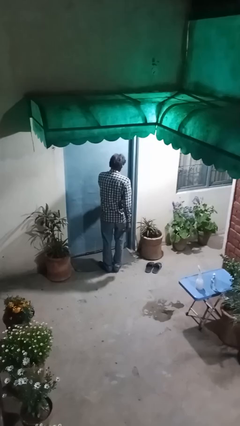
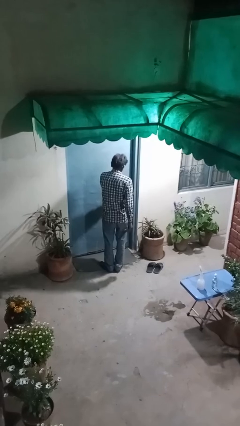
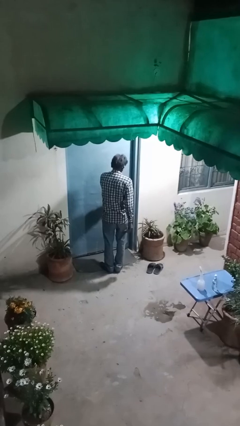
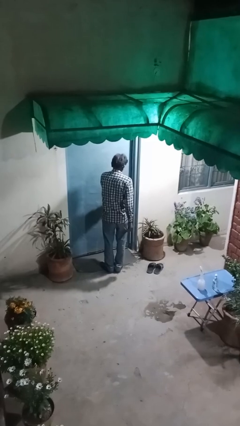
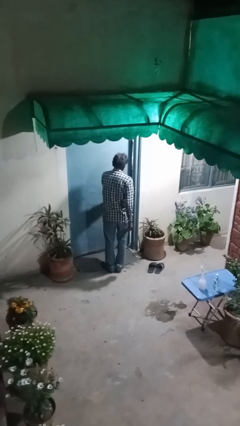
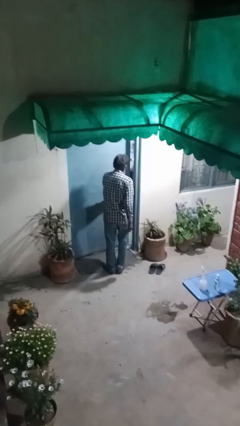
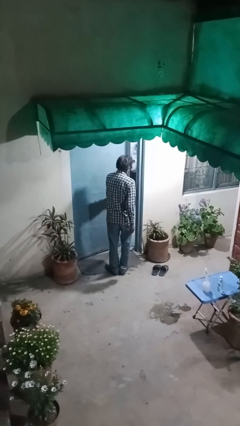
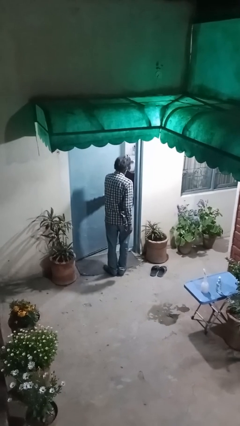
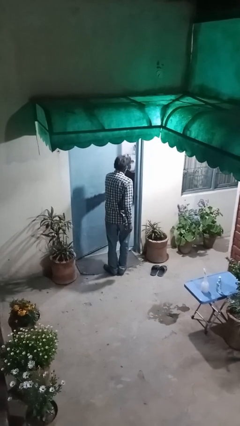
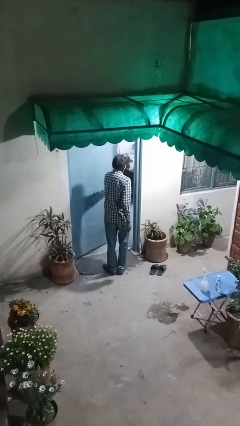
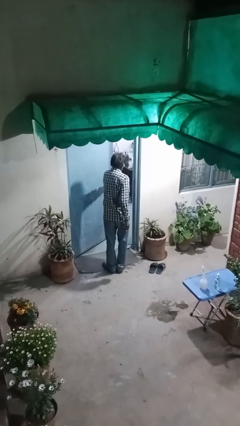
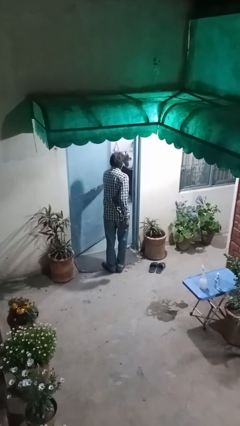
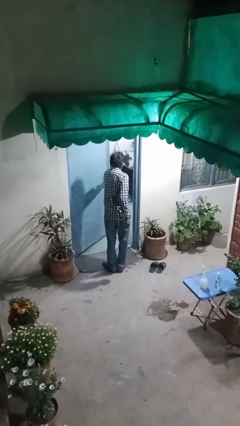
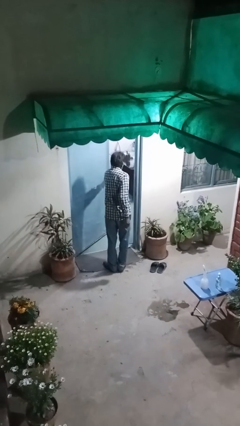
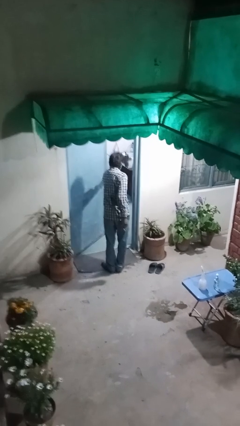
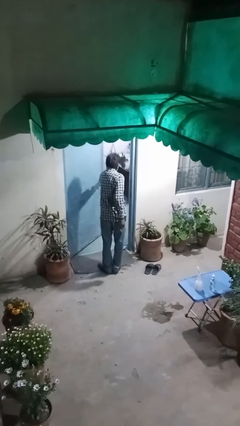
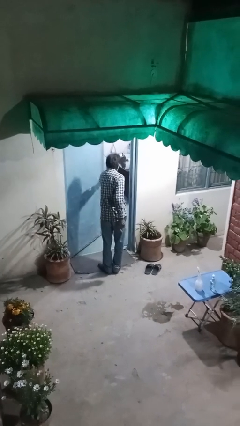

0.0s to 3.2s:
person opens facility door

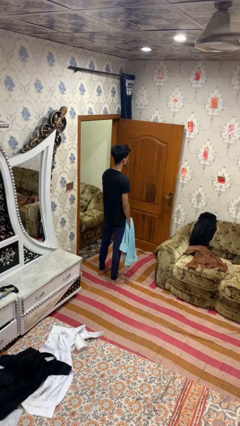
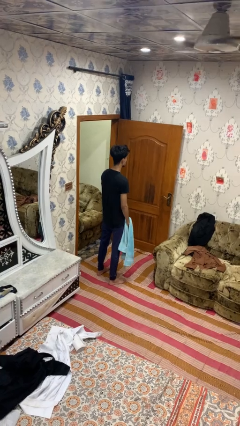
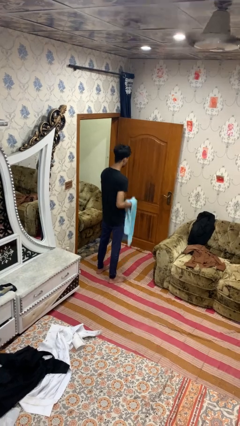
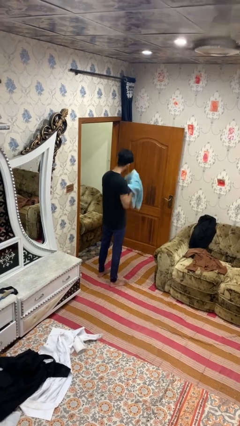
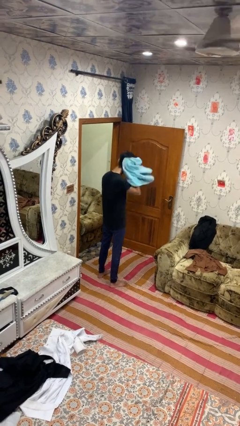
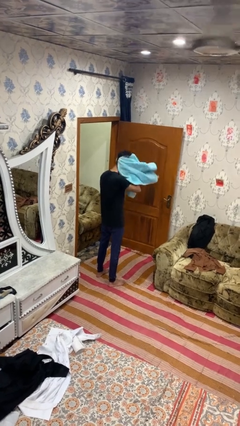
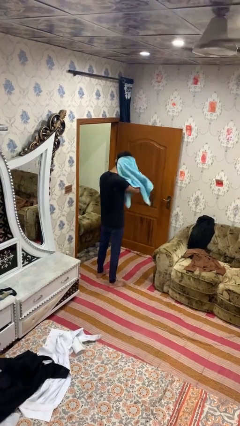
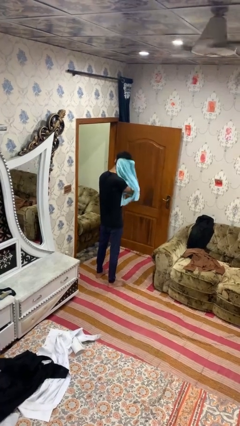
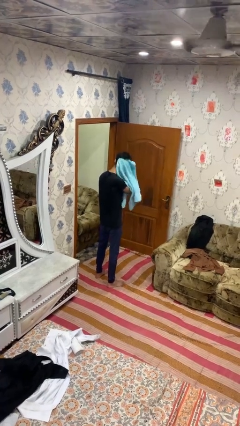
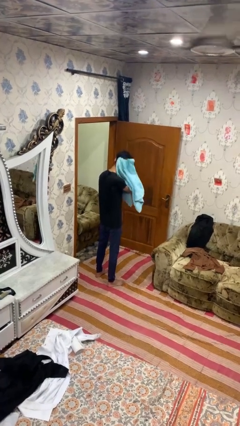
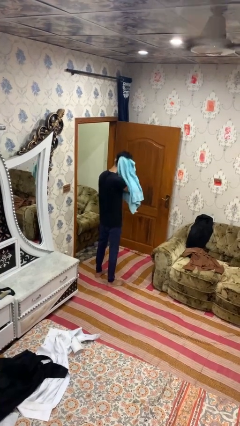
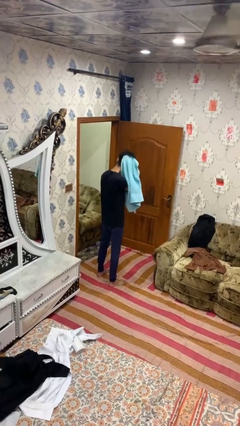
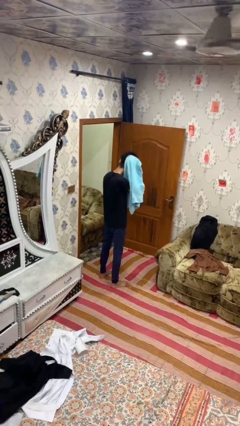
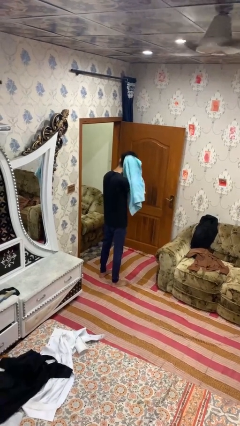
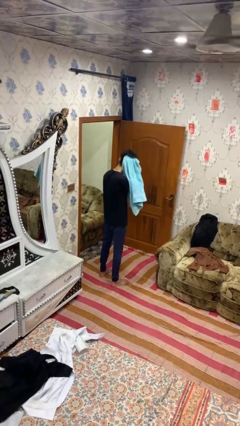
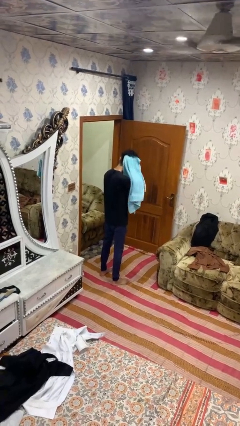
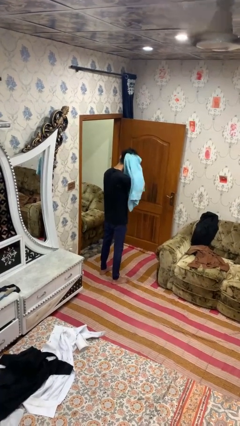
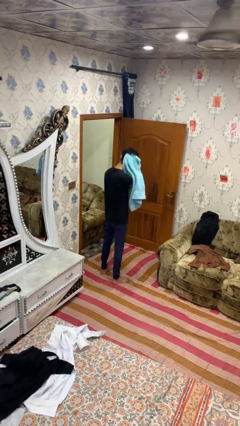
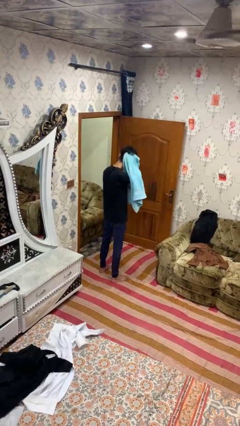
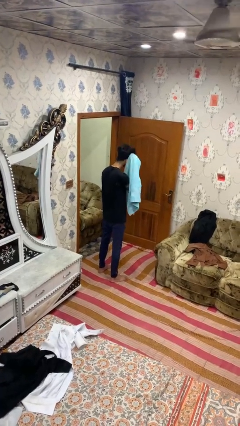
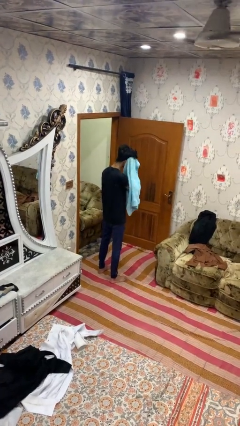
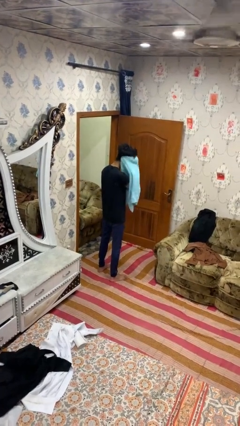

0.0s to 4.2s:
person dries hair with towel

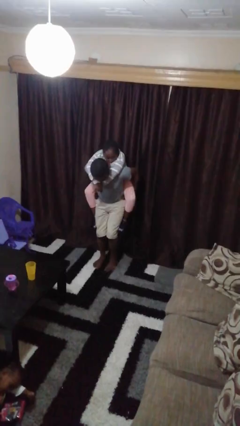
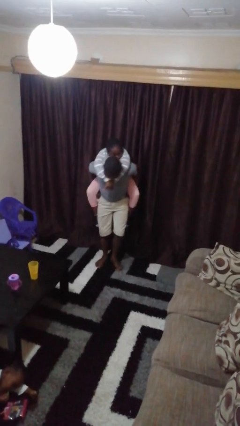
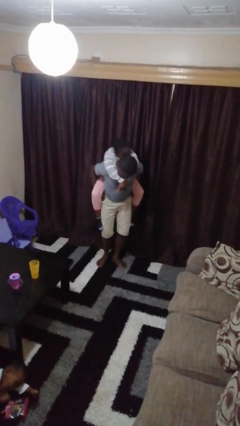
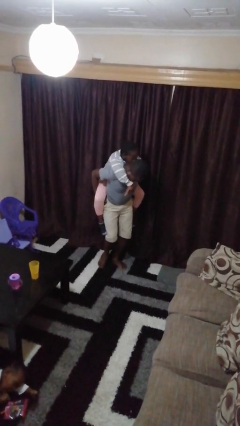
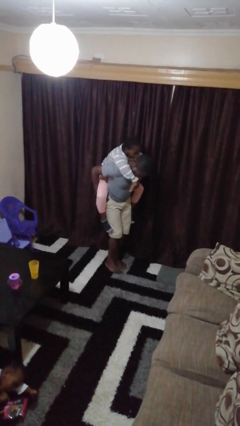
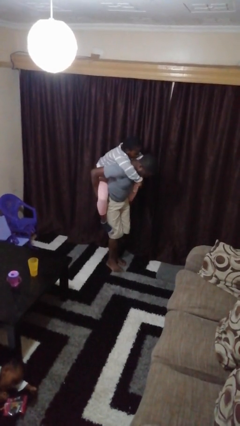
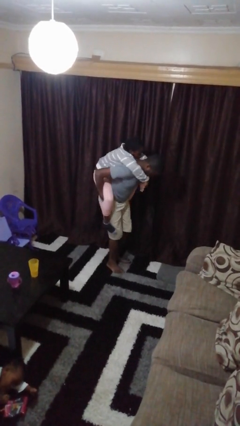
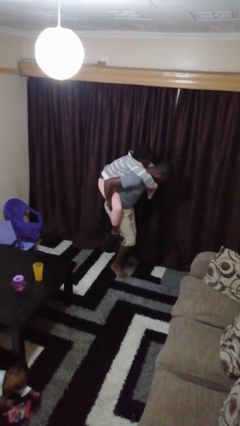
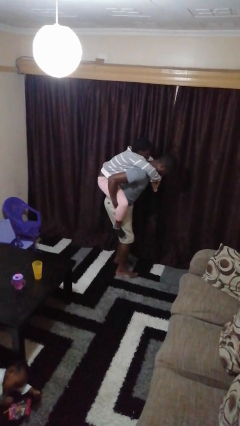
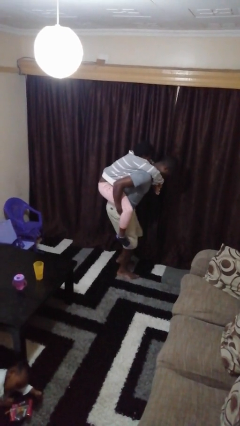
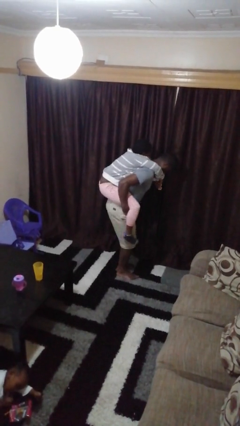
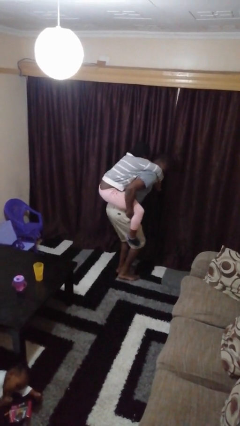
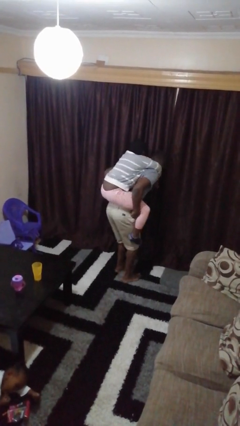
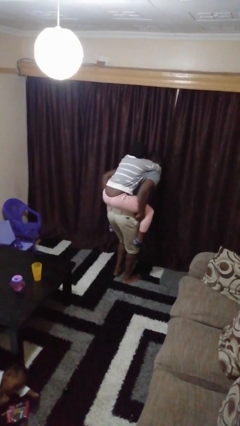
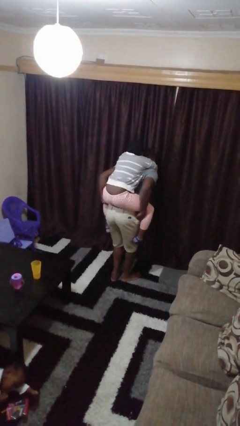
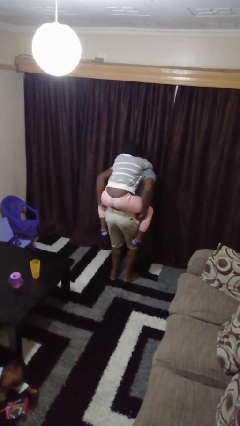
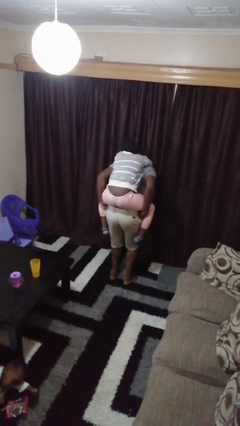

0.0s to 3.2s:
person carries person on back

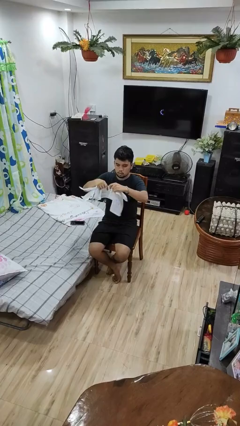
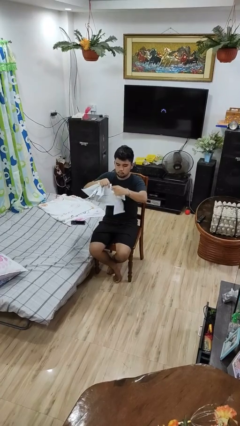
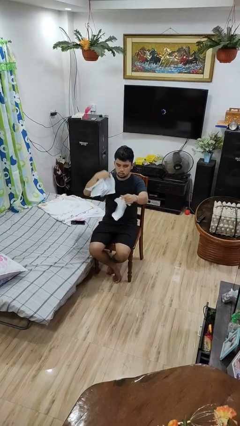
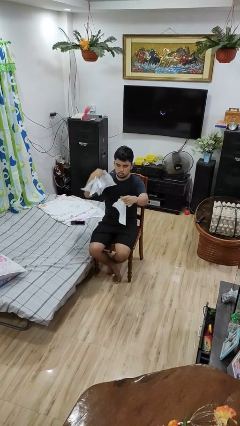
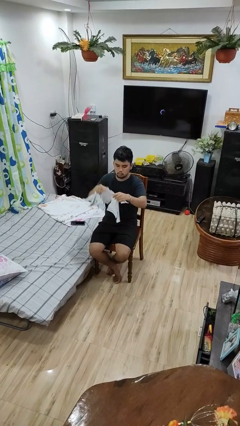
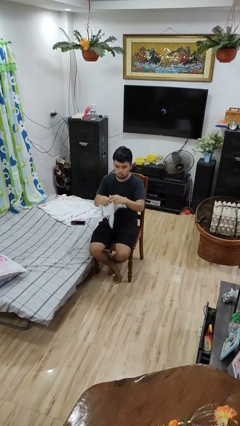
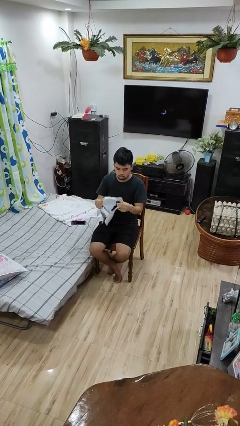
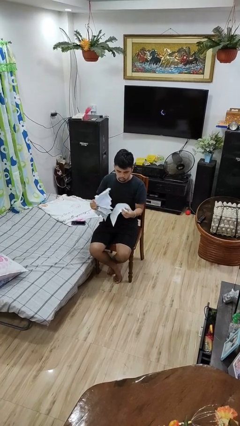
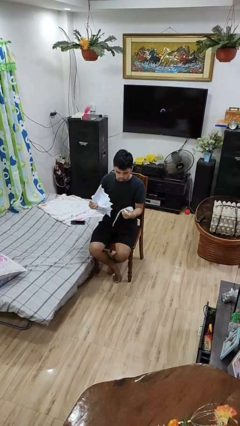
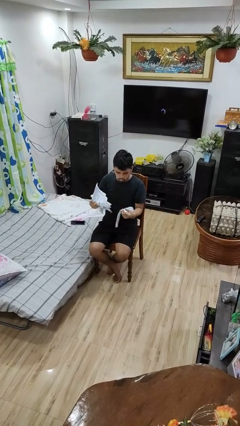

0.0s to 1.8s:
person tears paper

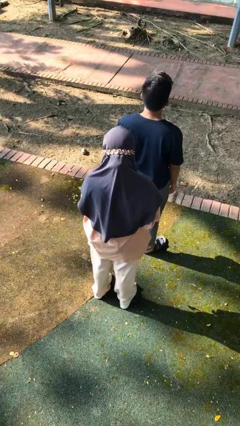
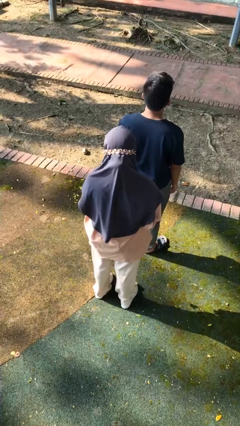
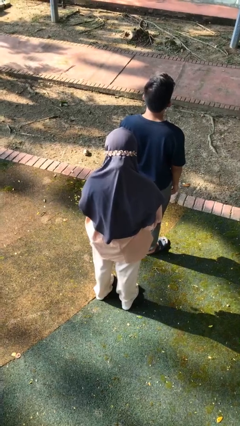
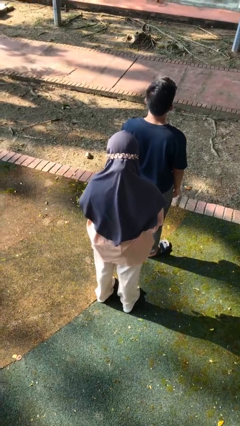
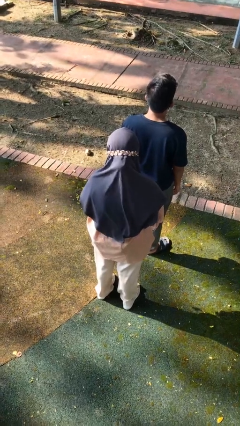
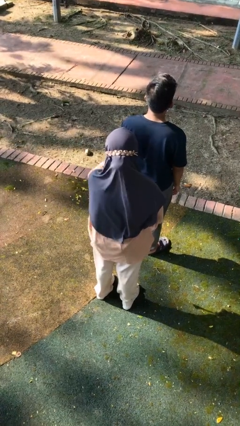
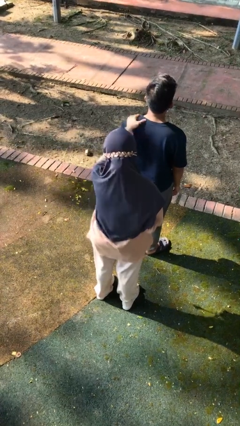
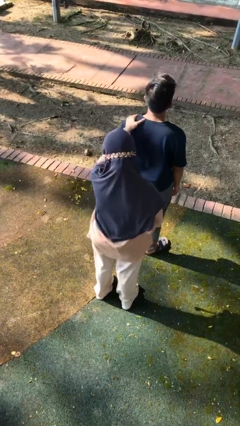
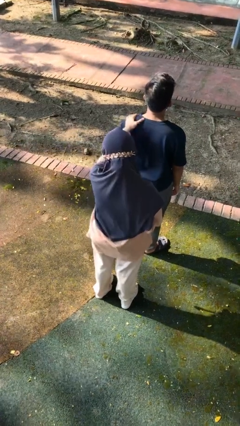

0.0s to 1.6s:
person grabs person by shoulder

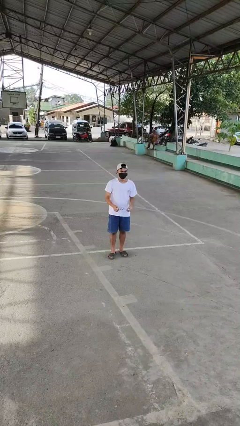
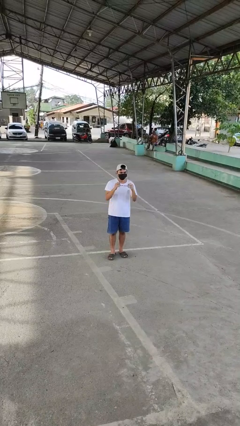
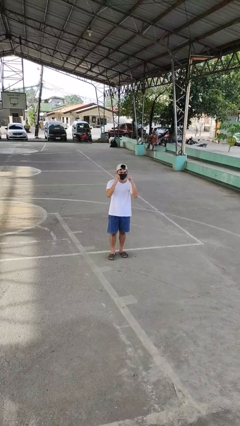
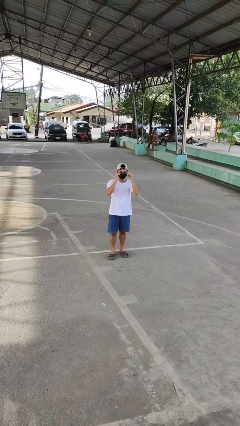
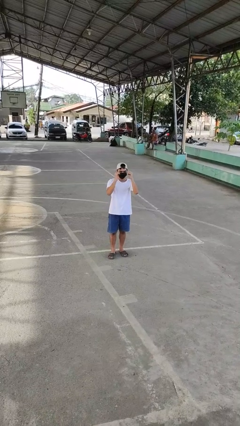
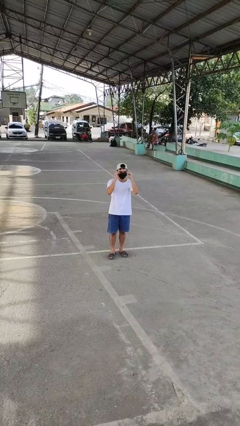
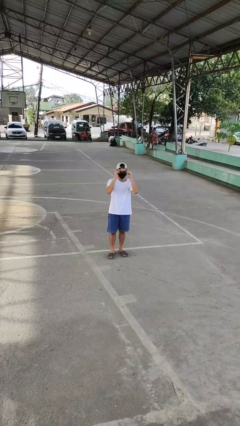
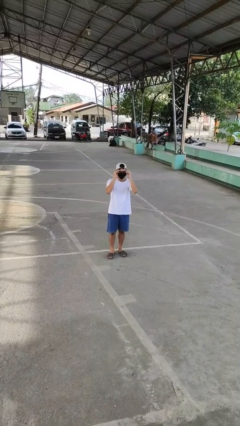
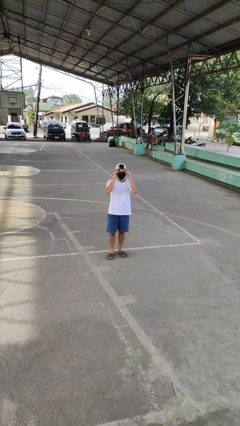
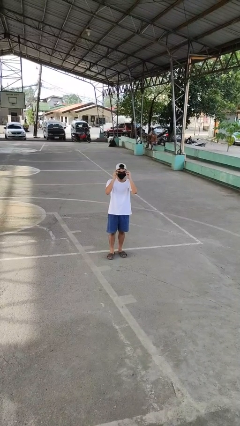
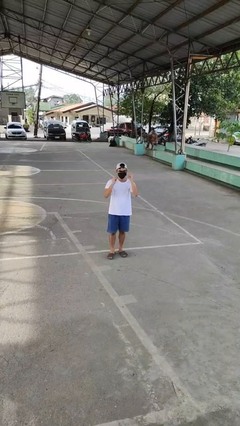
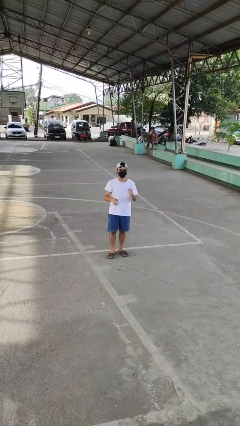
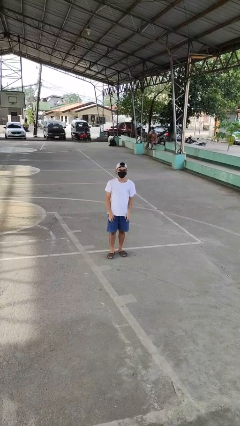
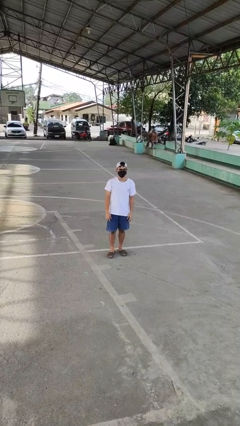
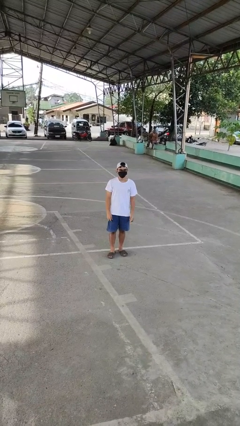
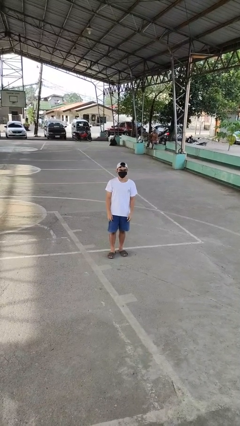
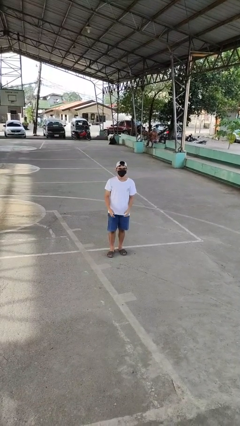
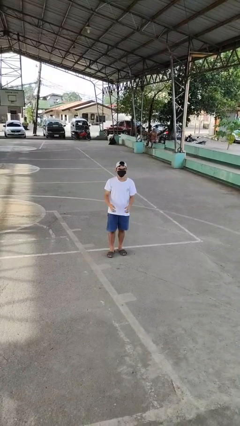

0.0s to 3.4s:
person puts on glasses

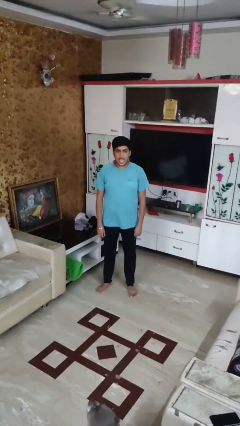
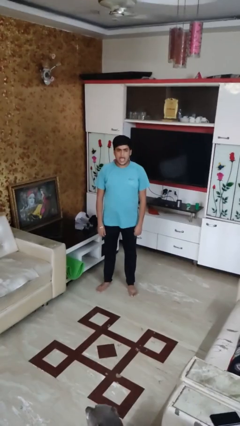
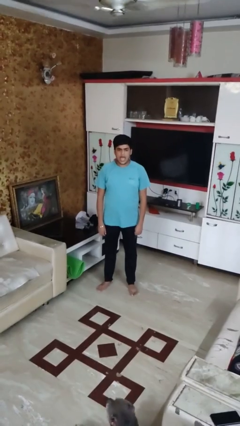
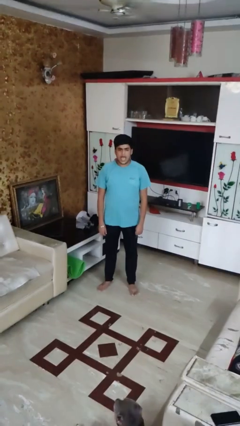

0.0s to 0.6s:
person sticks out tongue
